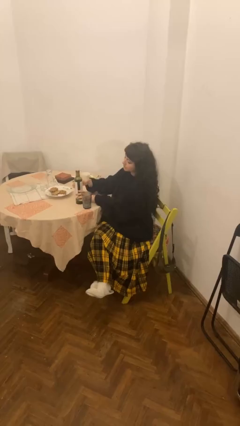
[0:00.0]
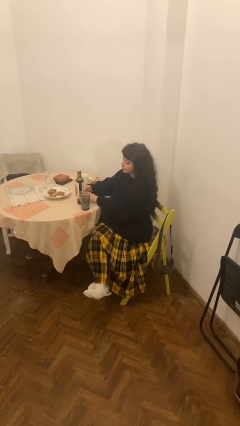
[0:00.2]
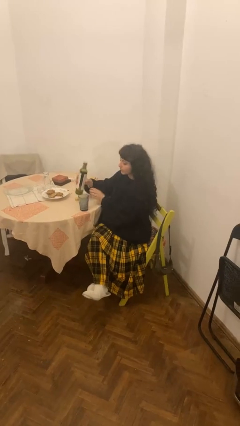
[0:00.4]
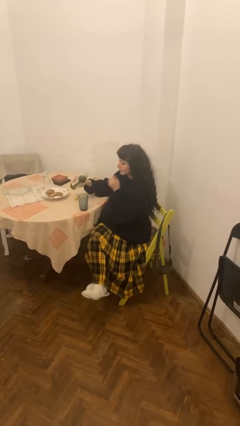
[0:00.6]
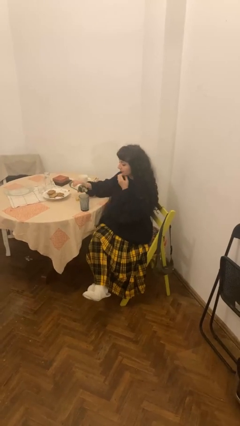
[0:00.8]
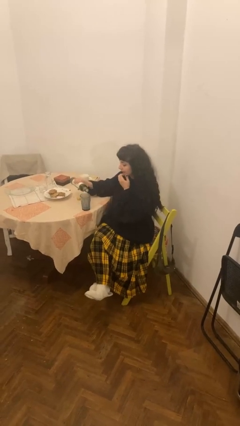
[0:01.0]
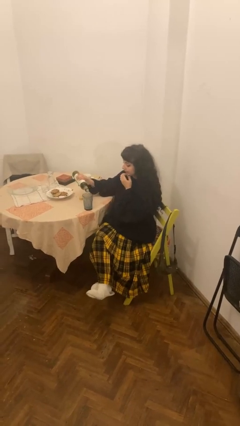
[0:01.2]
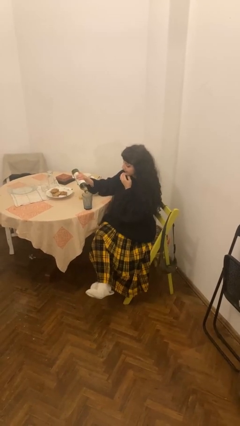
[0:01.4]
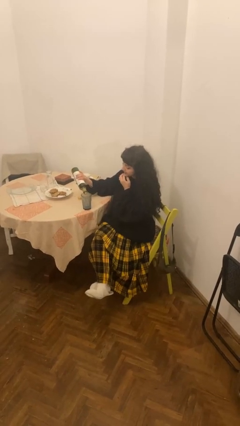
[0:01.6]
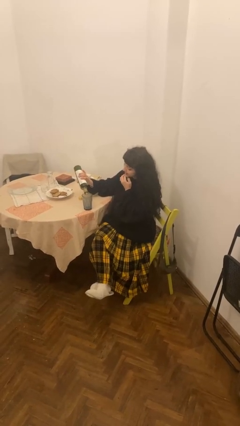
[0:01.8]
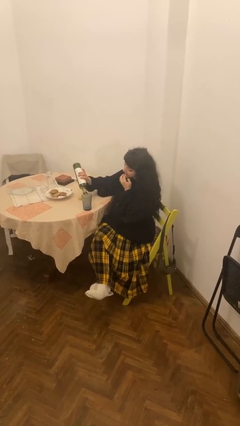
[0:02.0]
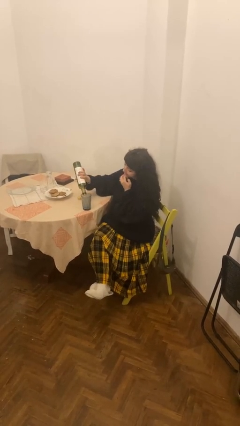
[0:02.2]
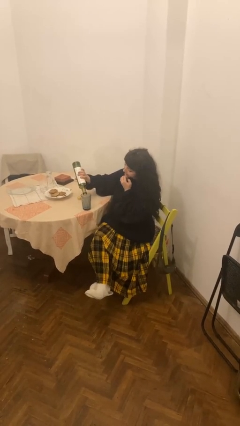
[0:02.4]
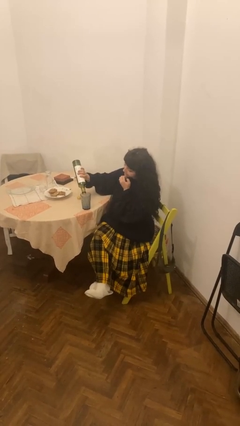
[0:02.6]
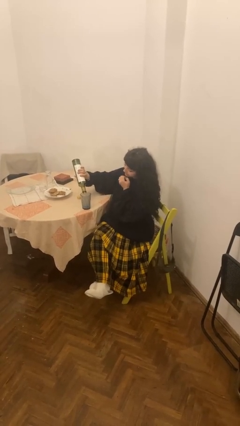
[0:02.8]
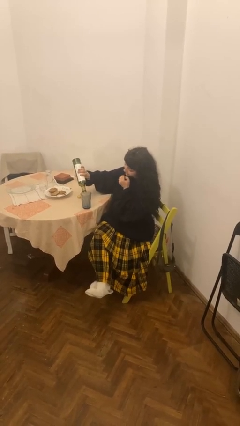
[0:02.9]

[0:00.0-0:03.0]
person pours liquid into cup

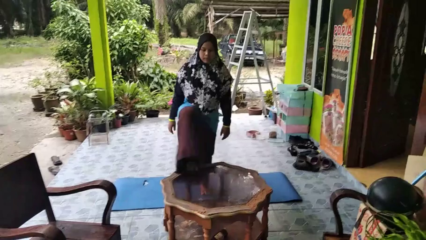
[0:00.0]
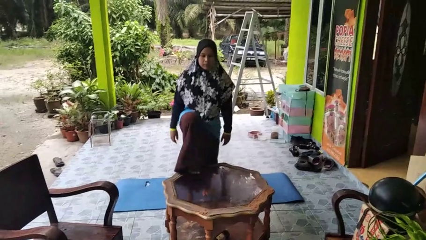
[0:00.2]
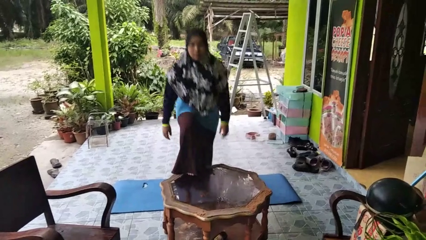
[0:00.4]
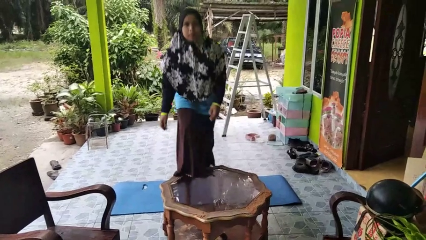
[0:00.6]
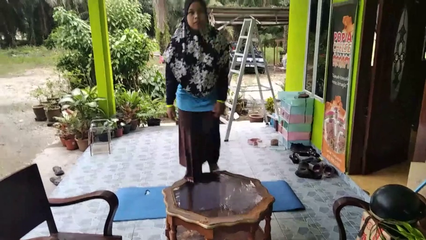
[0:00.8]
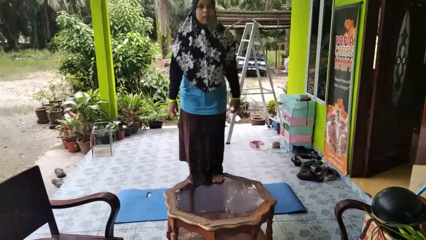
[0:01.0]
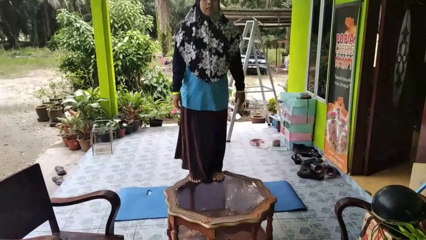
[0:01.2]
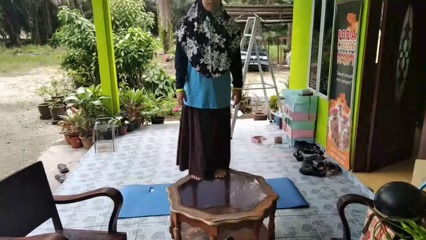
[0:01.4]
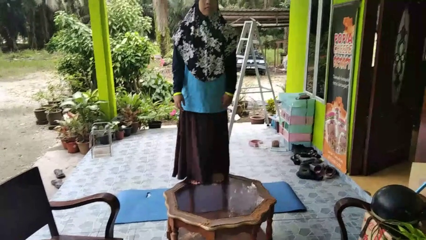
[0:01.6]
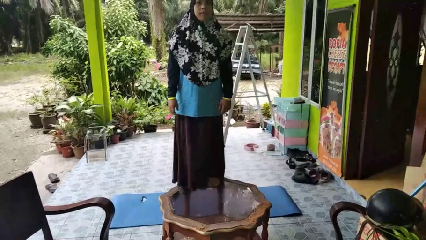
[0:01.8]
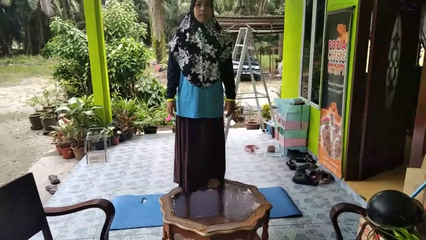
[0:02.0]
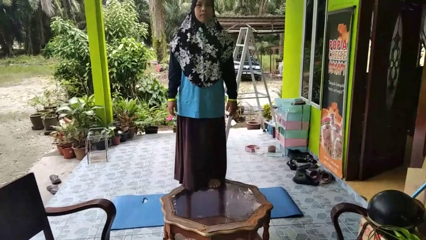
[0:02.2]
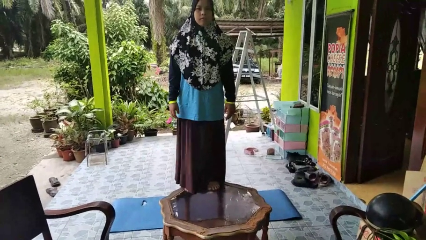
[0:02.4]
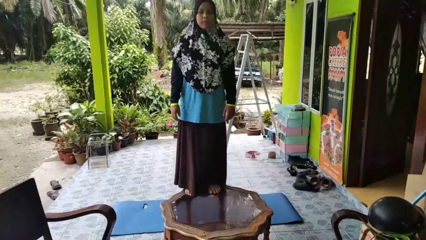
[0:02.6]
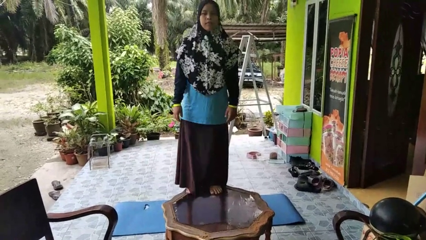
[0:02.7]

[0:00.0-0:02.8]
person climbs on table

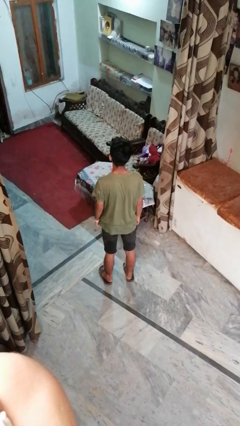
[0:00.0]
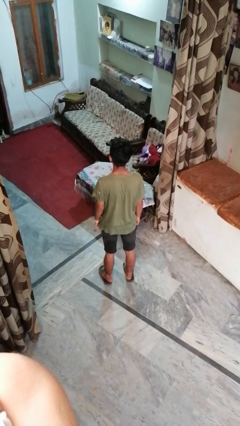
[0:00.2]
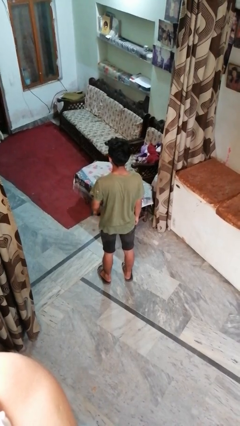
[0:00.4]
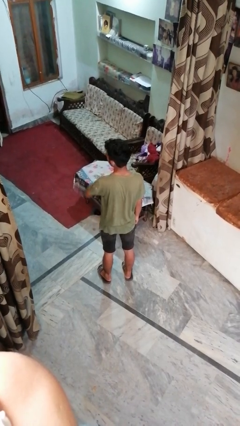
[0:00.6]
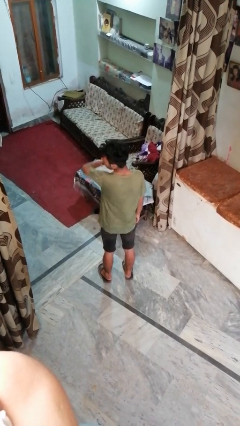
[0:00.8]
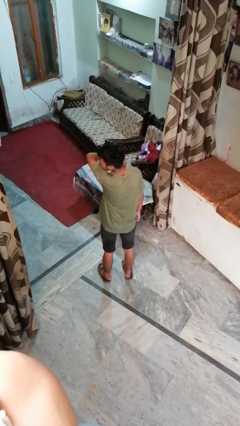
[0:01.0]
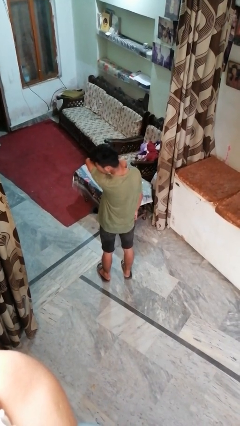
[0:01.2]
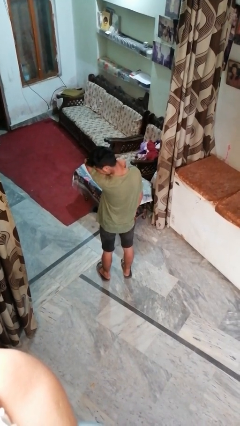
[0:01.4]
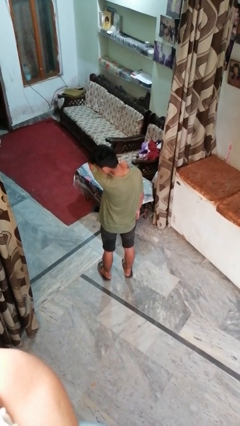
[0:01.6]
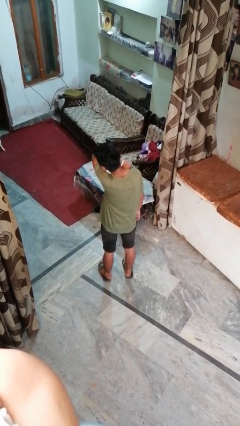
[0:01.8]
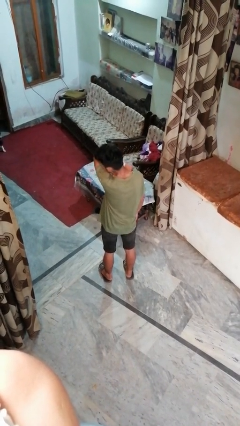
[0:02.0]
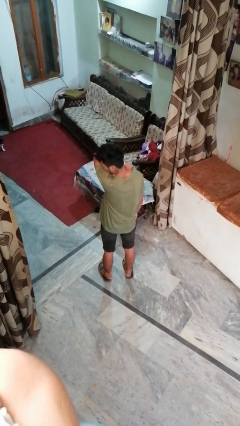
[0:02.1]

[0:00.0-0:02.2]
person sneezes into arm

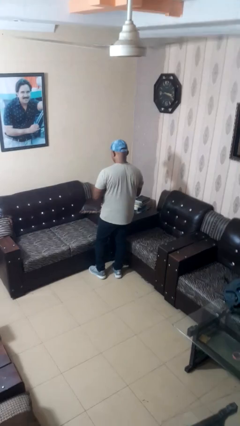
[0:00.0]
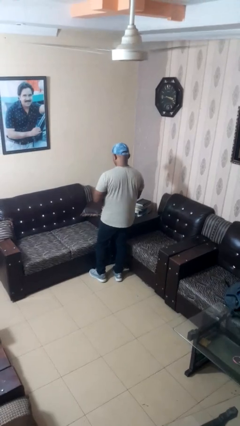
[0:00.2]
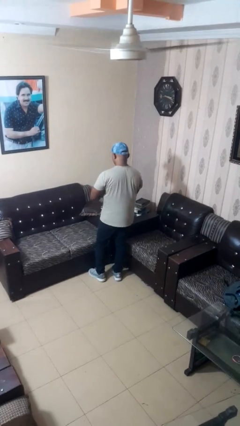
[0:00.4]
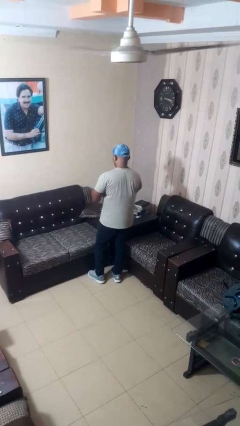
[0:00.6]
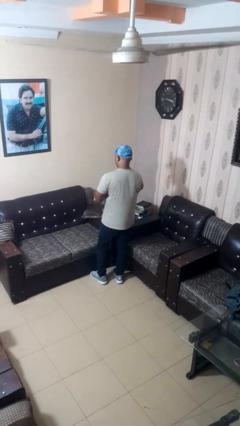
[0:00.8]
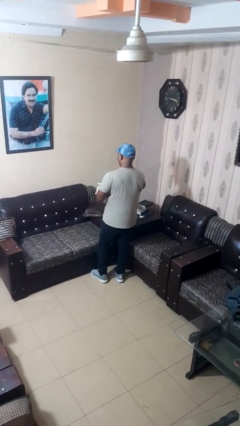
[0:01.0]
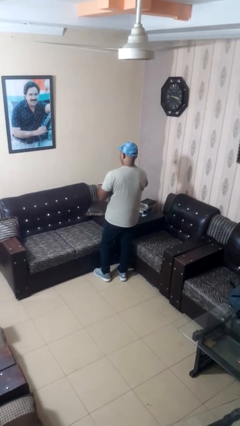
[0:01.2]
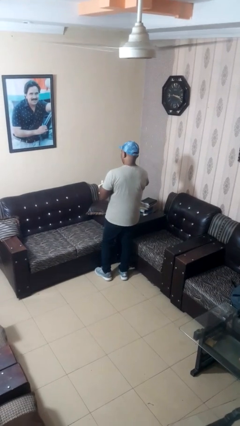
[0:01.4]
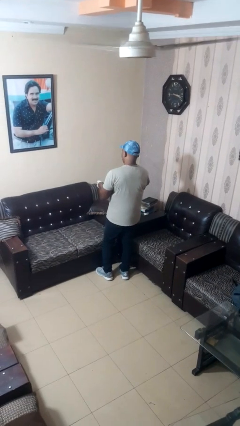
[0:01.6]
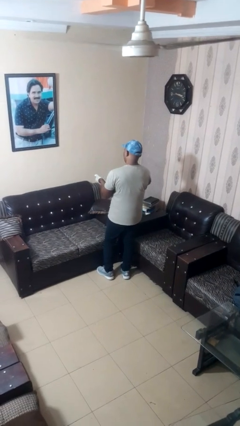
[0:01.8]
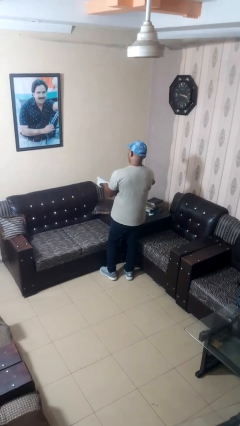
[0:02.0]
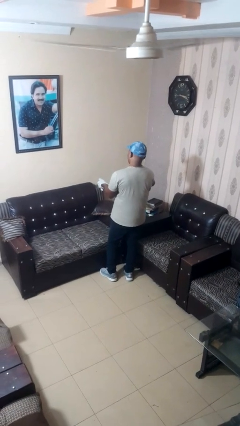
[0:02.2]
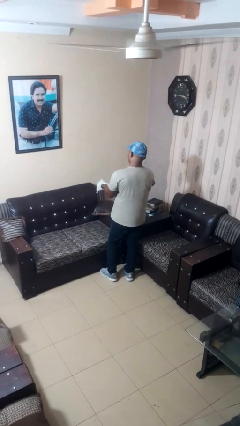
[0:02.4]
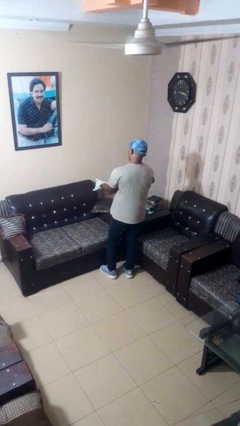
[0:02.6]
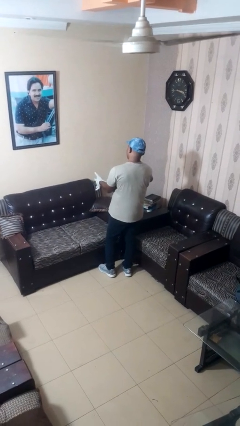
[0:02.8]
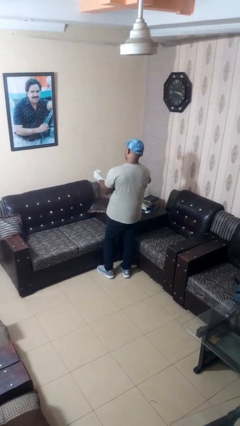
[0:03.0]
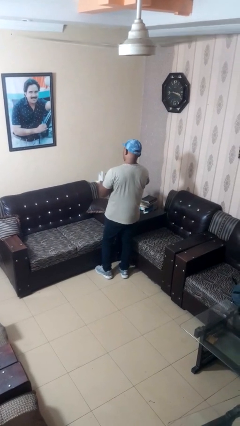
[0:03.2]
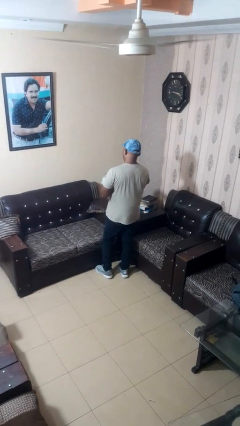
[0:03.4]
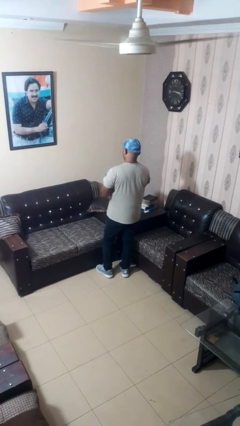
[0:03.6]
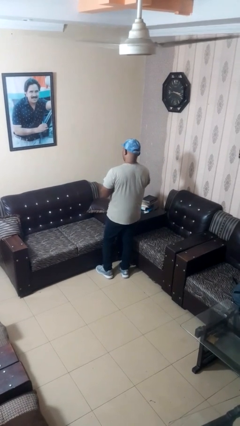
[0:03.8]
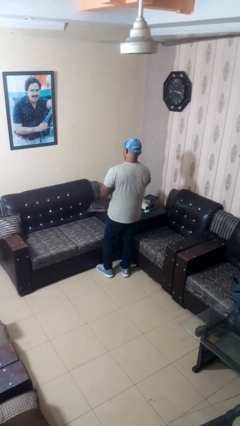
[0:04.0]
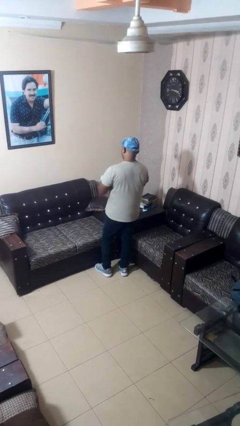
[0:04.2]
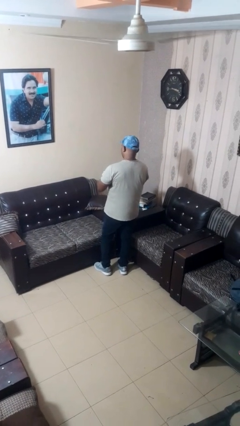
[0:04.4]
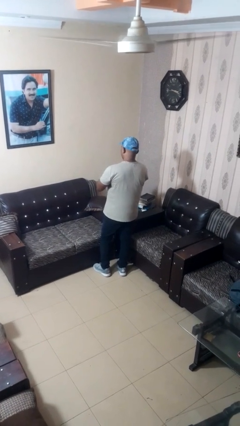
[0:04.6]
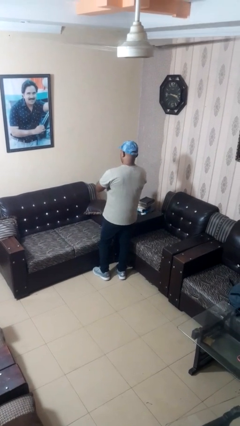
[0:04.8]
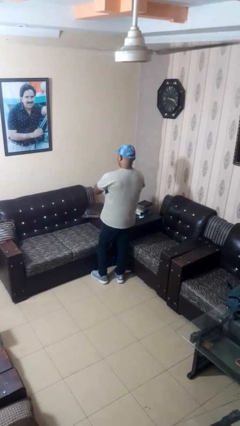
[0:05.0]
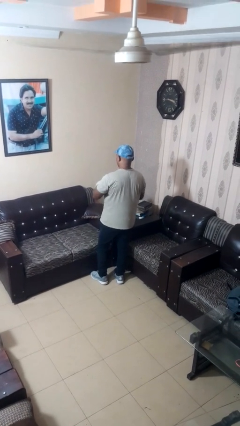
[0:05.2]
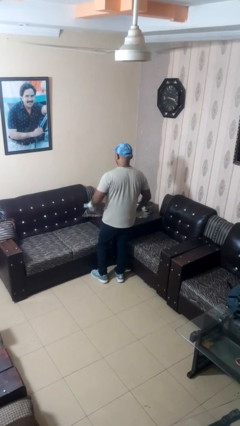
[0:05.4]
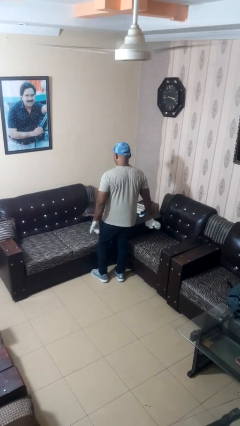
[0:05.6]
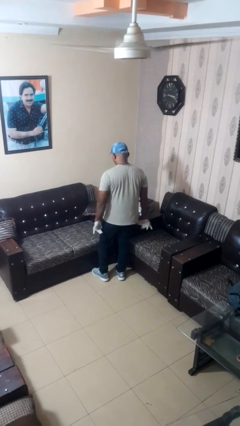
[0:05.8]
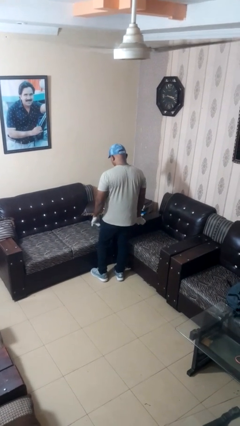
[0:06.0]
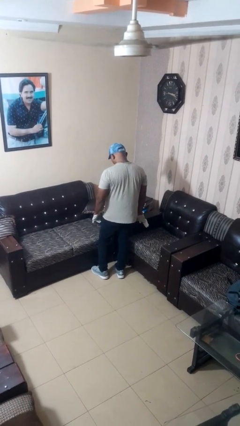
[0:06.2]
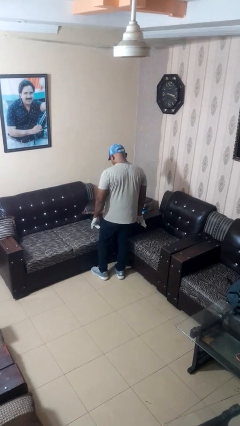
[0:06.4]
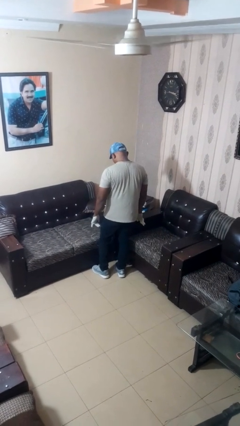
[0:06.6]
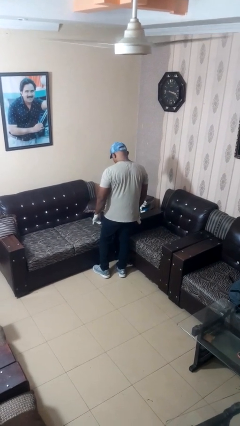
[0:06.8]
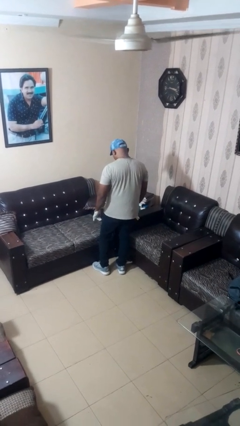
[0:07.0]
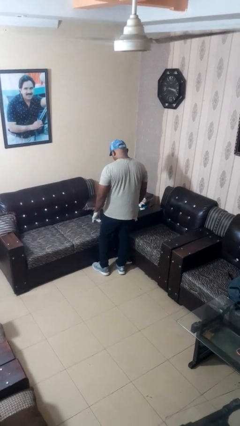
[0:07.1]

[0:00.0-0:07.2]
person puts on gloves

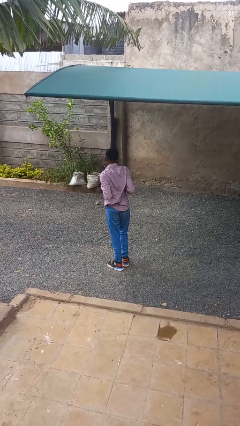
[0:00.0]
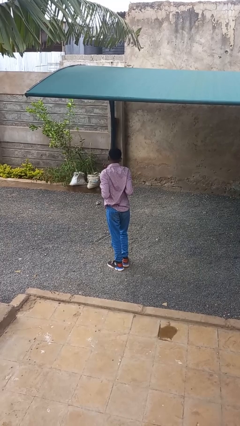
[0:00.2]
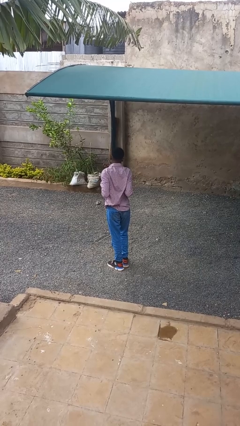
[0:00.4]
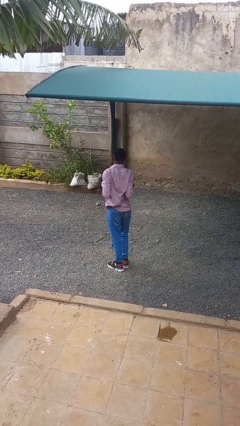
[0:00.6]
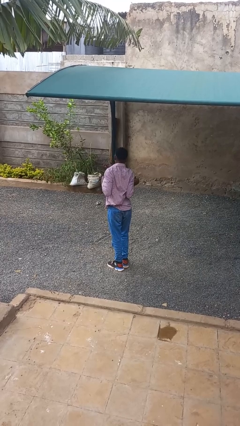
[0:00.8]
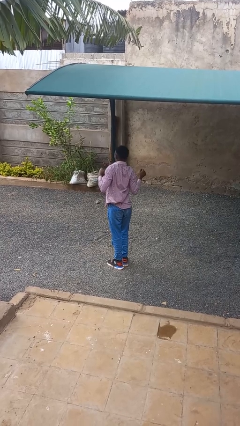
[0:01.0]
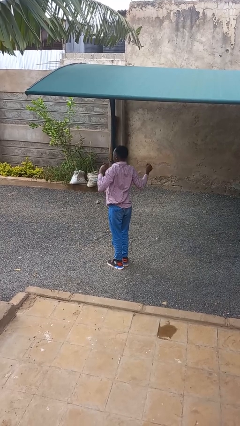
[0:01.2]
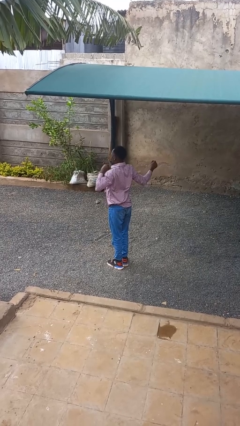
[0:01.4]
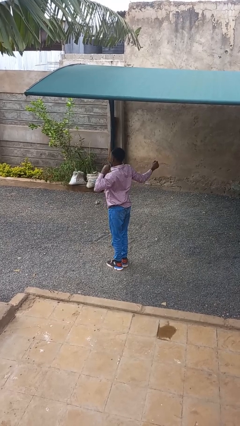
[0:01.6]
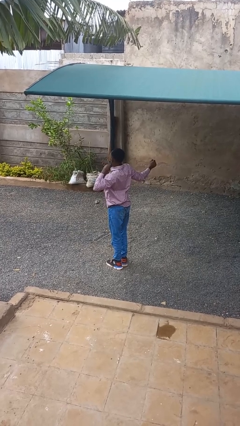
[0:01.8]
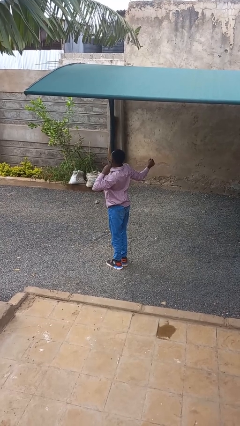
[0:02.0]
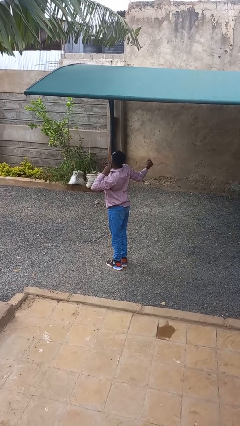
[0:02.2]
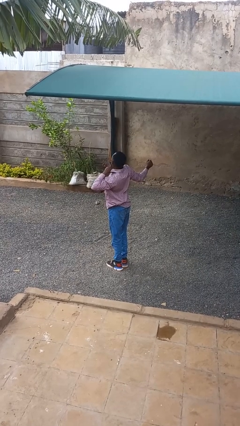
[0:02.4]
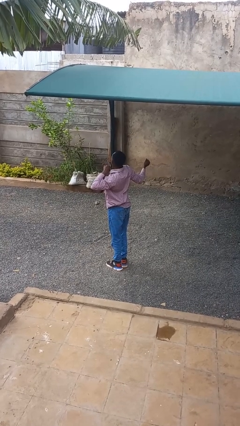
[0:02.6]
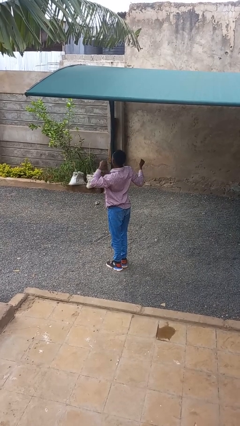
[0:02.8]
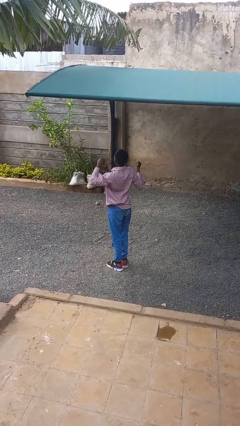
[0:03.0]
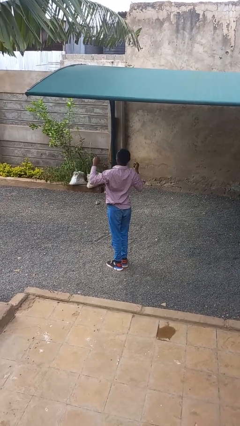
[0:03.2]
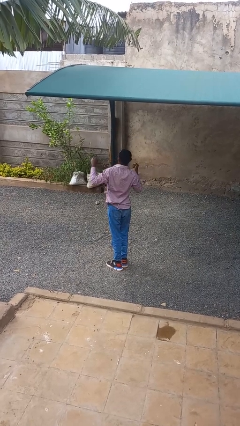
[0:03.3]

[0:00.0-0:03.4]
person stretches arms to side
